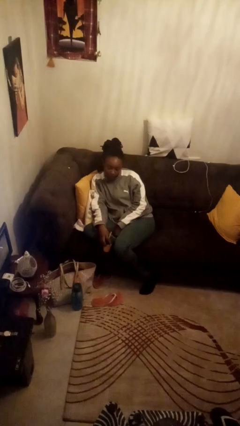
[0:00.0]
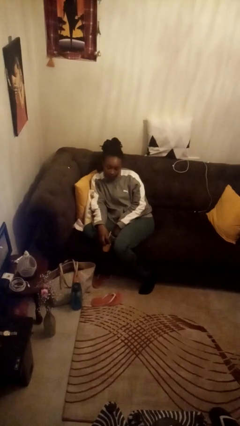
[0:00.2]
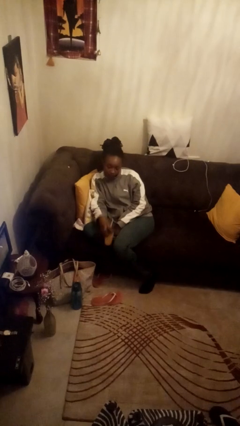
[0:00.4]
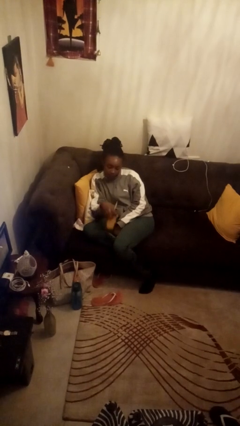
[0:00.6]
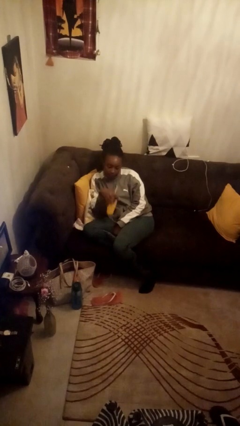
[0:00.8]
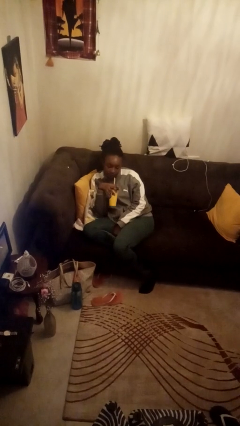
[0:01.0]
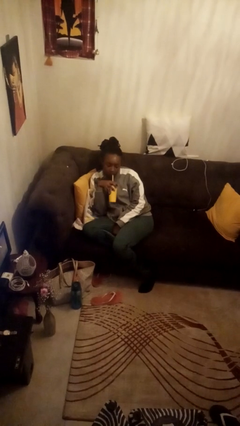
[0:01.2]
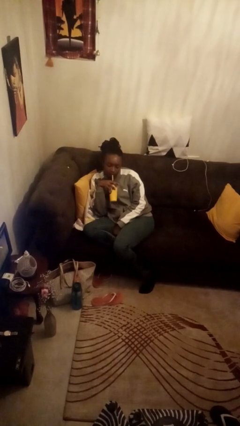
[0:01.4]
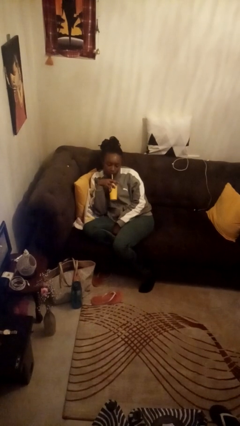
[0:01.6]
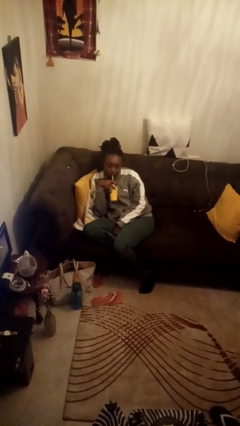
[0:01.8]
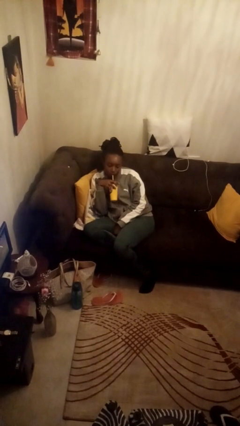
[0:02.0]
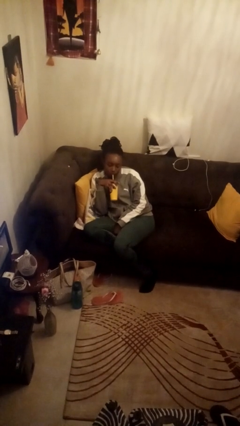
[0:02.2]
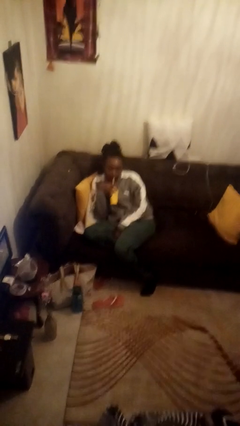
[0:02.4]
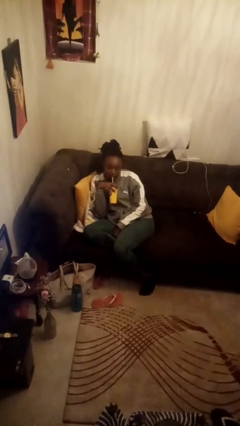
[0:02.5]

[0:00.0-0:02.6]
person drinks from straw

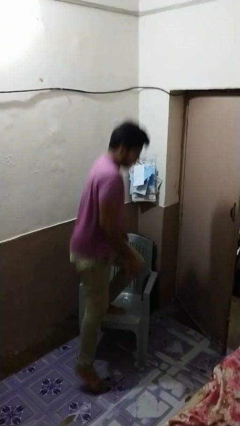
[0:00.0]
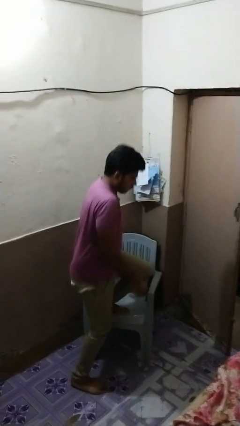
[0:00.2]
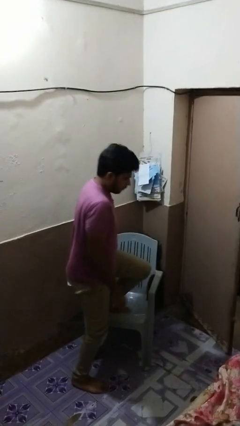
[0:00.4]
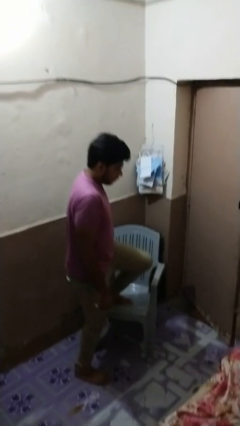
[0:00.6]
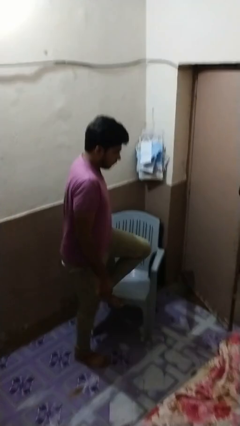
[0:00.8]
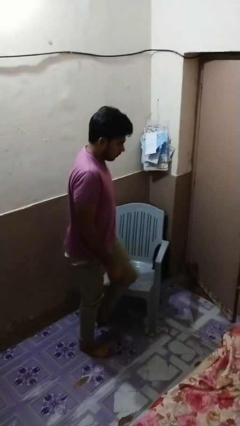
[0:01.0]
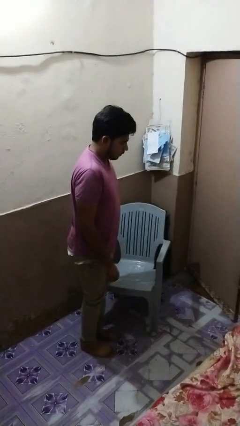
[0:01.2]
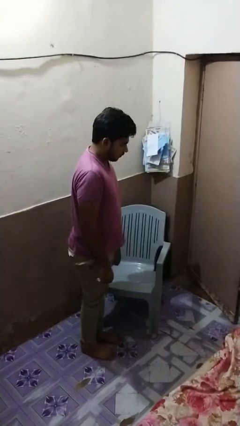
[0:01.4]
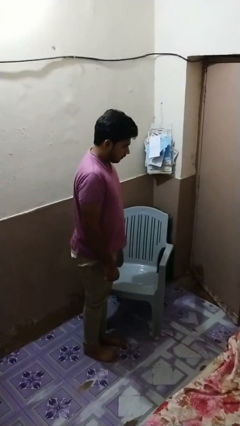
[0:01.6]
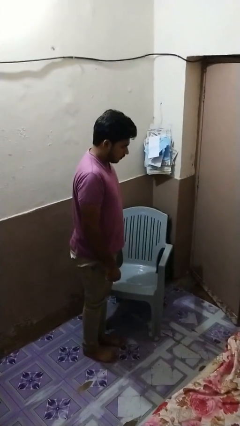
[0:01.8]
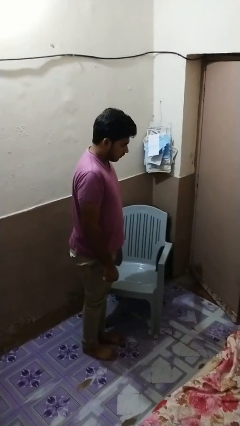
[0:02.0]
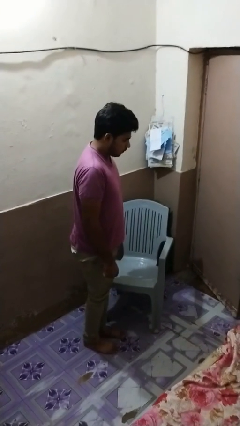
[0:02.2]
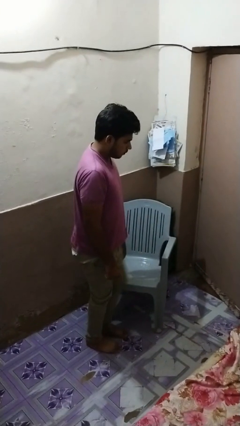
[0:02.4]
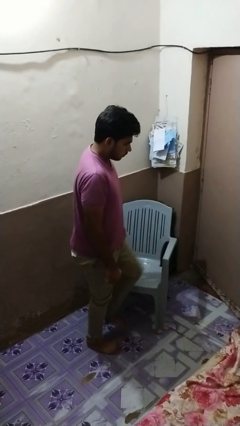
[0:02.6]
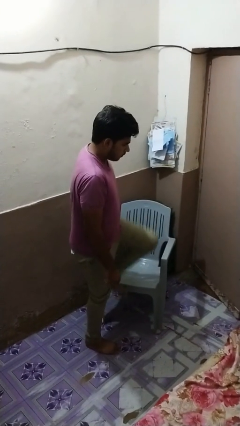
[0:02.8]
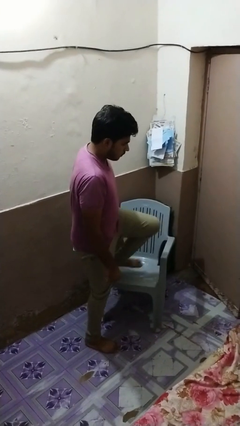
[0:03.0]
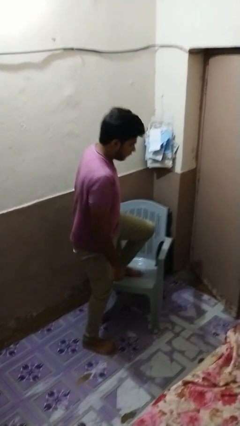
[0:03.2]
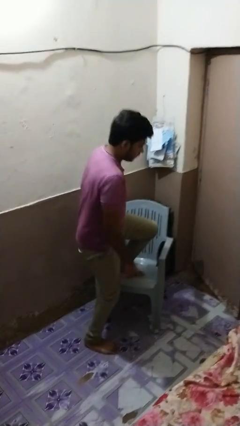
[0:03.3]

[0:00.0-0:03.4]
person climbs off chair

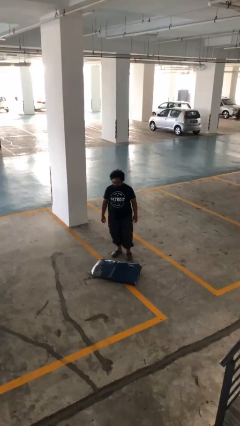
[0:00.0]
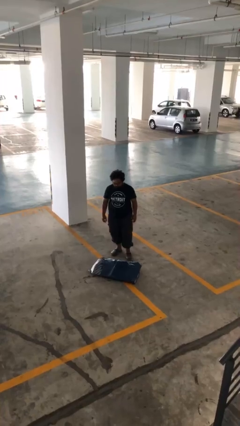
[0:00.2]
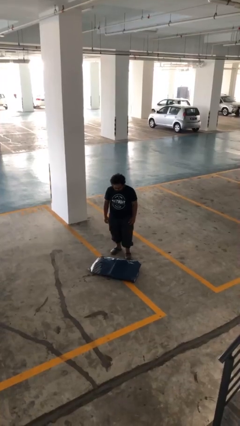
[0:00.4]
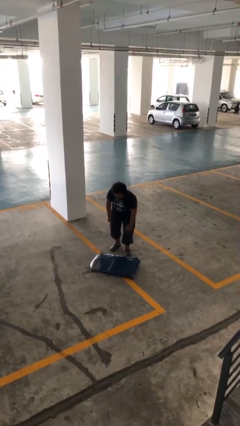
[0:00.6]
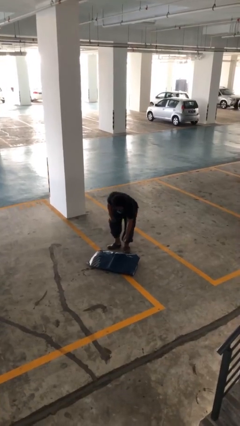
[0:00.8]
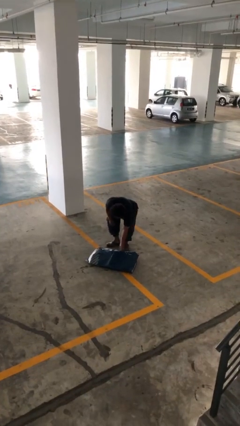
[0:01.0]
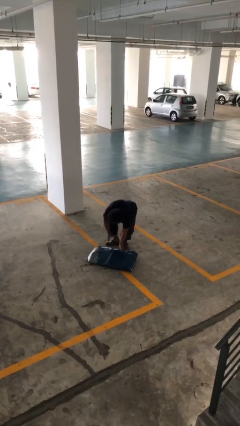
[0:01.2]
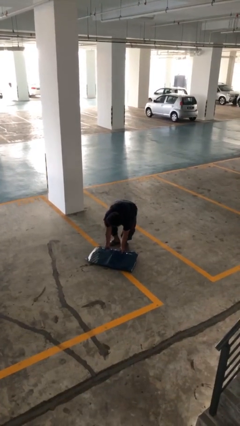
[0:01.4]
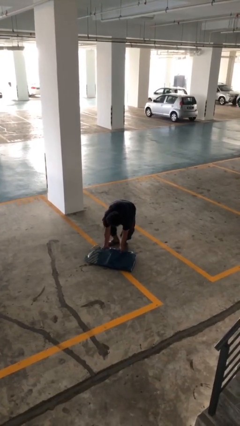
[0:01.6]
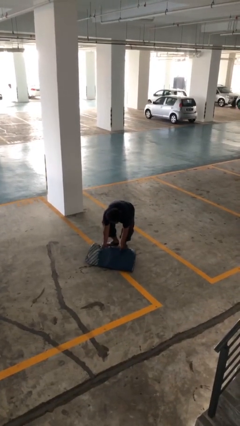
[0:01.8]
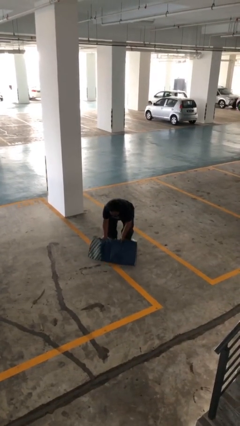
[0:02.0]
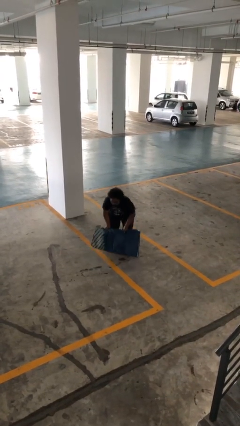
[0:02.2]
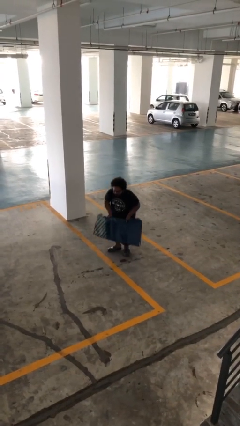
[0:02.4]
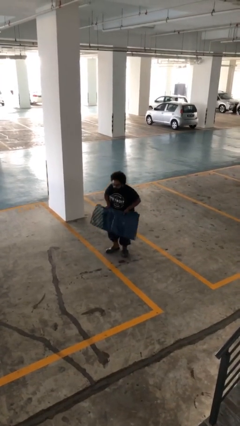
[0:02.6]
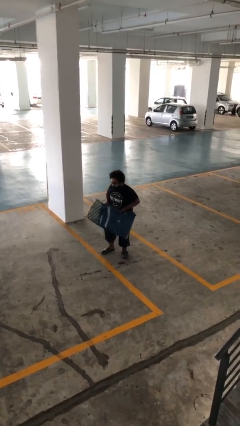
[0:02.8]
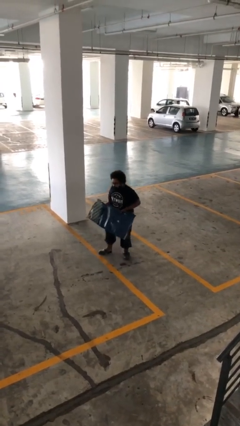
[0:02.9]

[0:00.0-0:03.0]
person picks up object from floor

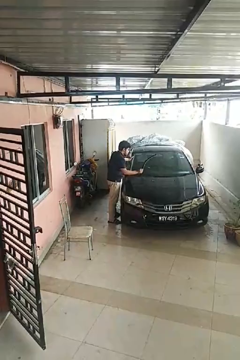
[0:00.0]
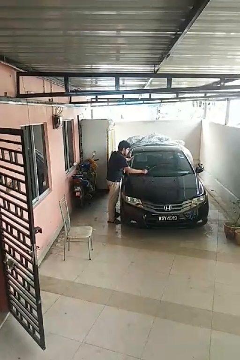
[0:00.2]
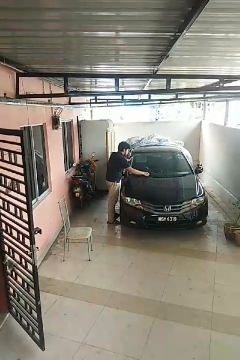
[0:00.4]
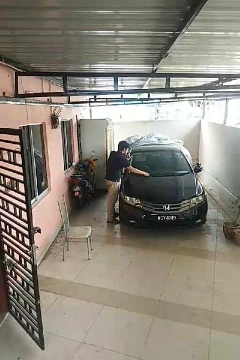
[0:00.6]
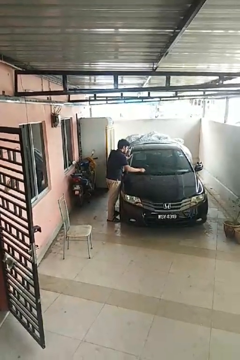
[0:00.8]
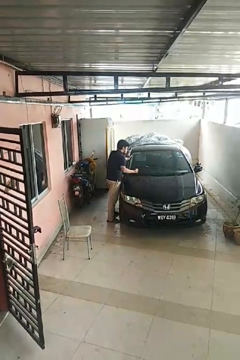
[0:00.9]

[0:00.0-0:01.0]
person flips down car wipers

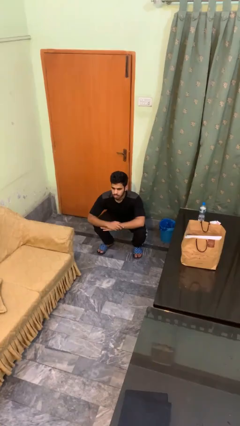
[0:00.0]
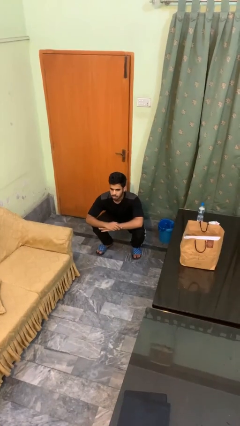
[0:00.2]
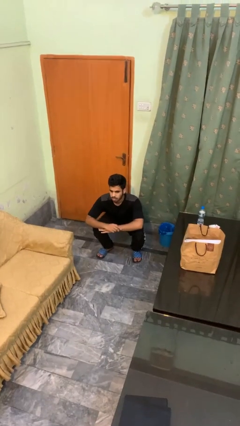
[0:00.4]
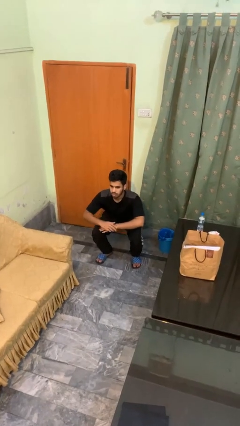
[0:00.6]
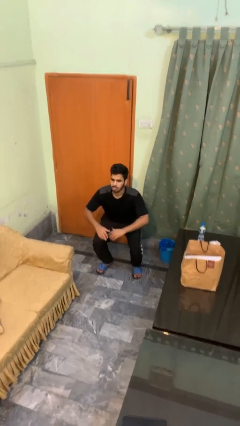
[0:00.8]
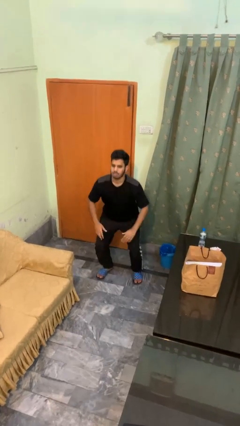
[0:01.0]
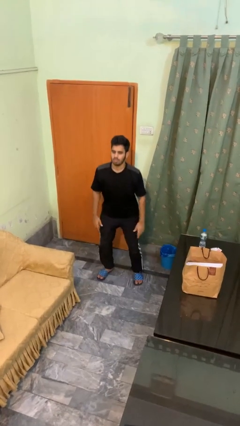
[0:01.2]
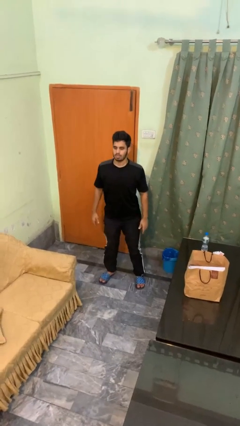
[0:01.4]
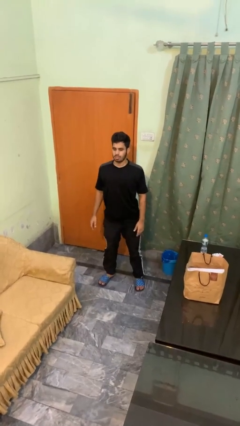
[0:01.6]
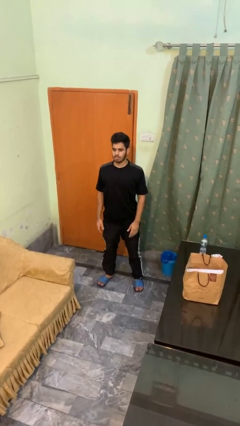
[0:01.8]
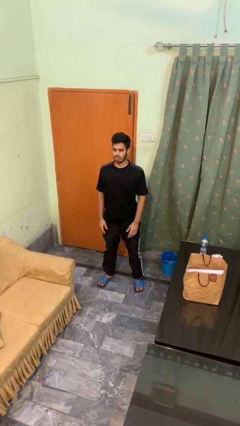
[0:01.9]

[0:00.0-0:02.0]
person stands up

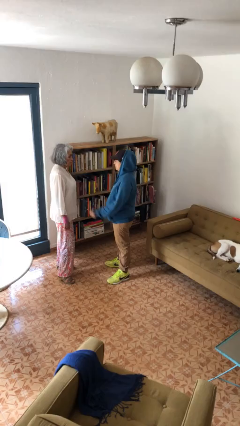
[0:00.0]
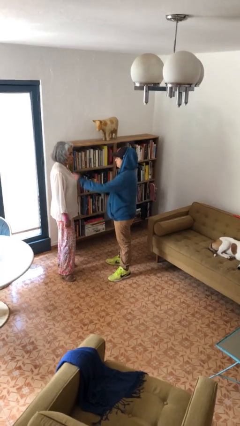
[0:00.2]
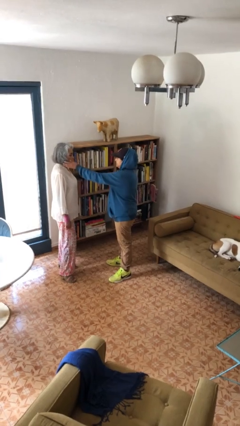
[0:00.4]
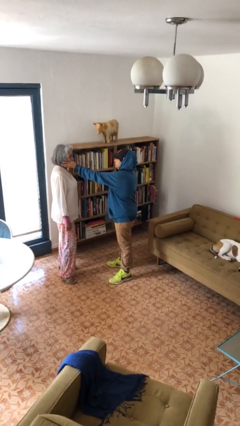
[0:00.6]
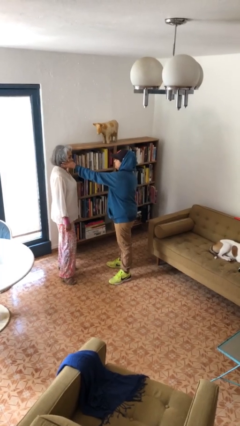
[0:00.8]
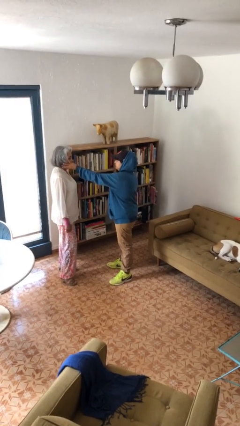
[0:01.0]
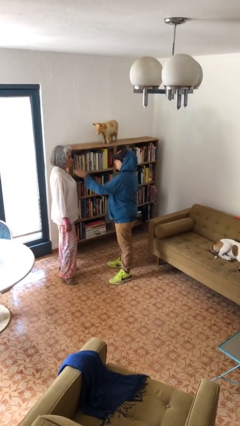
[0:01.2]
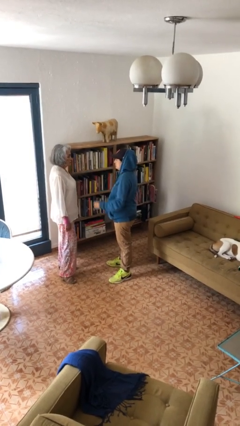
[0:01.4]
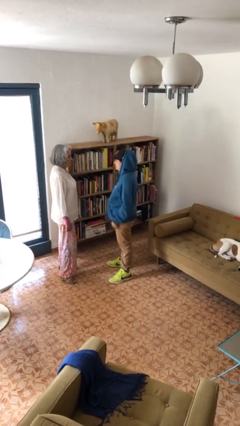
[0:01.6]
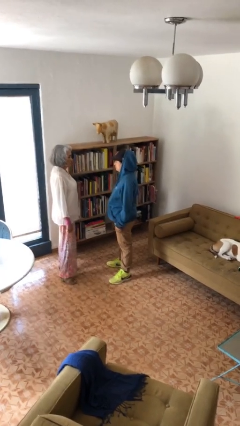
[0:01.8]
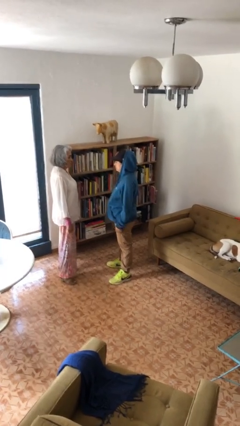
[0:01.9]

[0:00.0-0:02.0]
person touches face of person

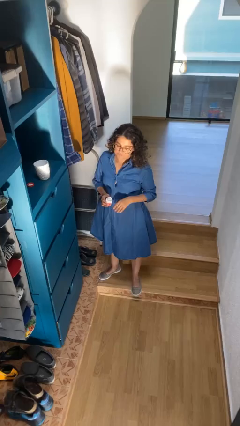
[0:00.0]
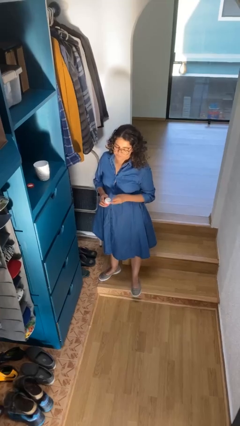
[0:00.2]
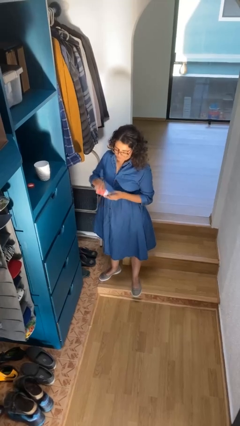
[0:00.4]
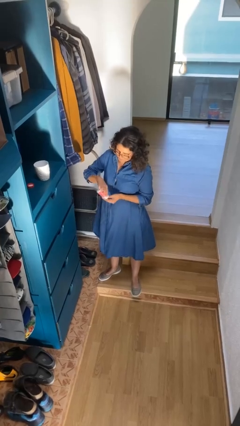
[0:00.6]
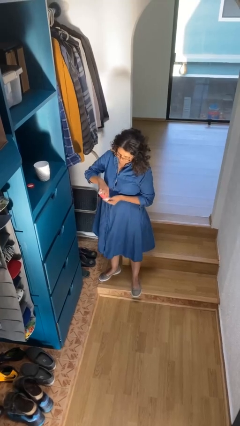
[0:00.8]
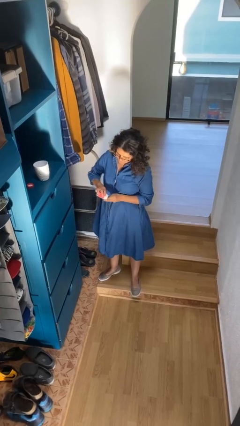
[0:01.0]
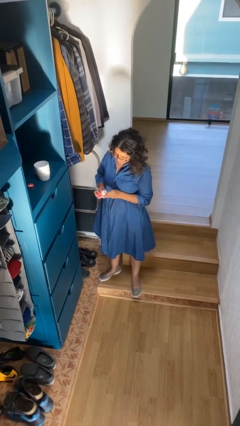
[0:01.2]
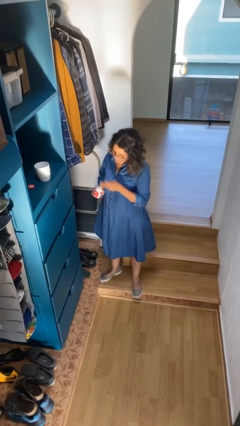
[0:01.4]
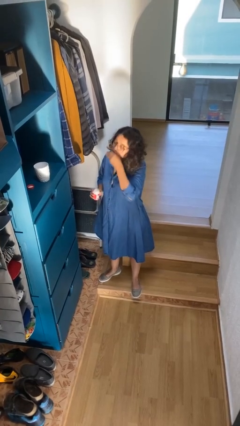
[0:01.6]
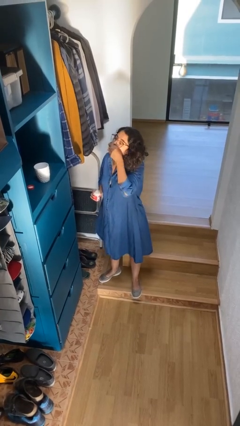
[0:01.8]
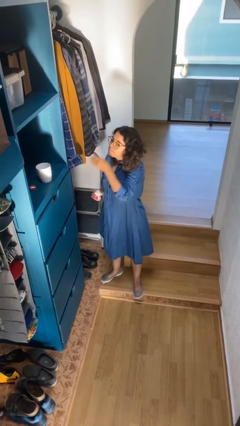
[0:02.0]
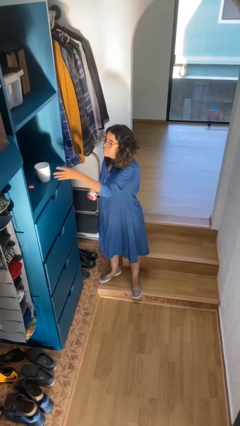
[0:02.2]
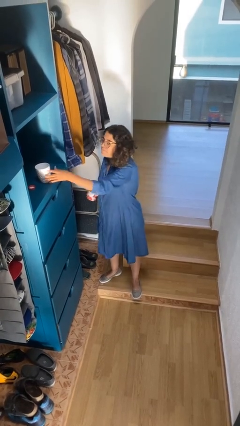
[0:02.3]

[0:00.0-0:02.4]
person takes medicine pills

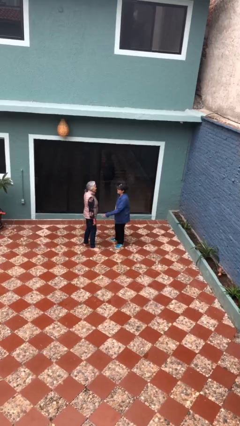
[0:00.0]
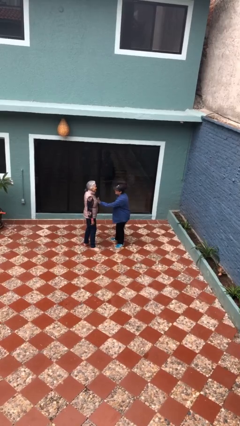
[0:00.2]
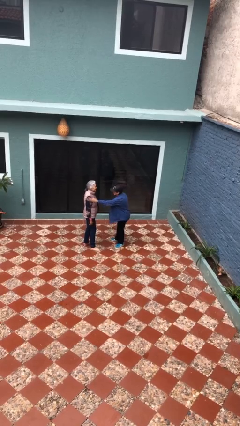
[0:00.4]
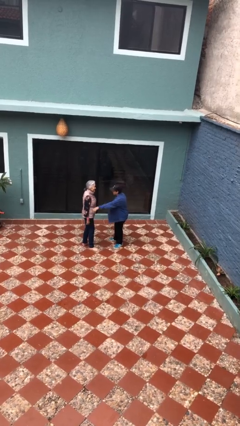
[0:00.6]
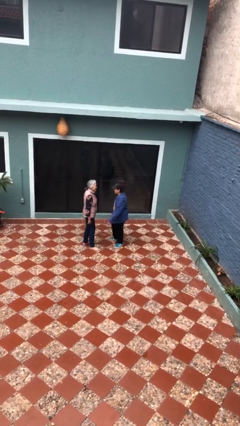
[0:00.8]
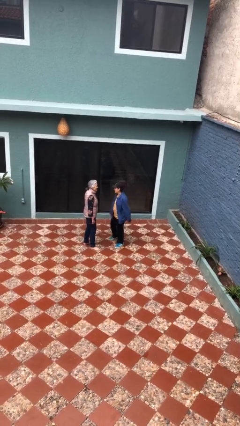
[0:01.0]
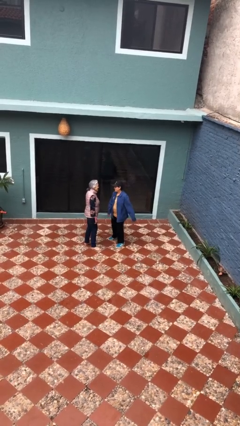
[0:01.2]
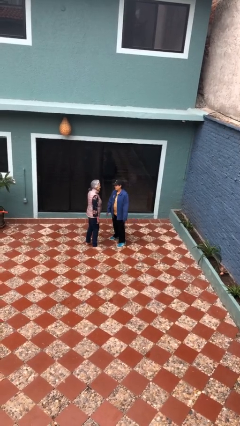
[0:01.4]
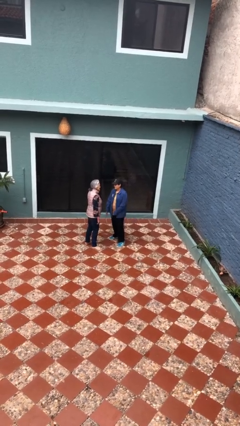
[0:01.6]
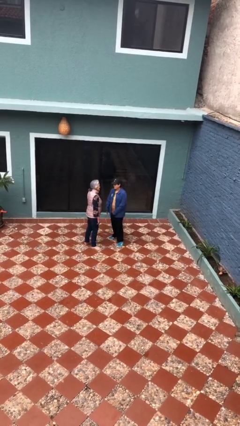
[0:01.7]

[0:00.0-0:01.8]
person shoves person
